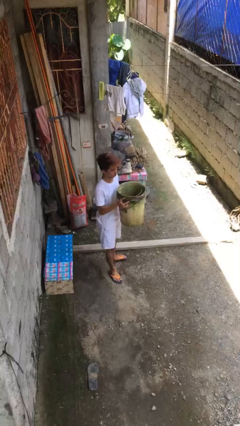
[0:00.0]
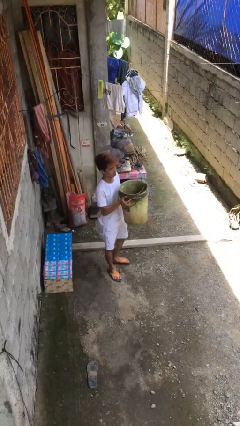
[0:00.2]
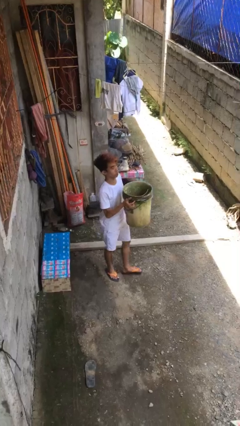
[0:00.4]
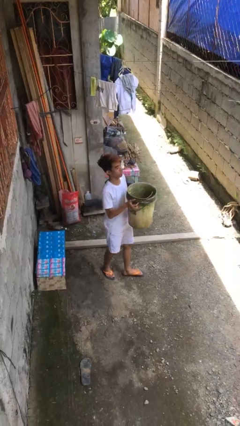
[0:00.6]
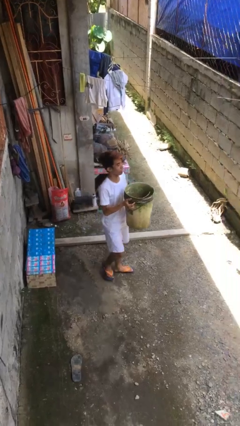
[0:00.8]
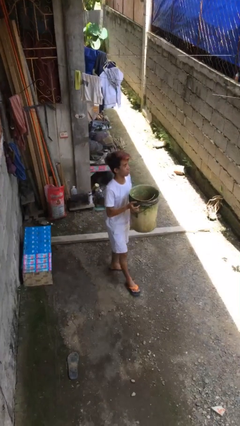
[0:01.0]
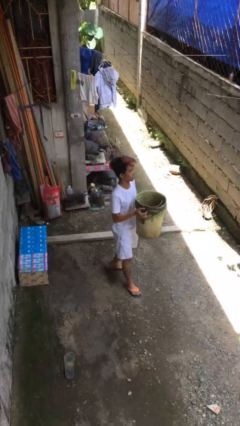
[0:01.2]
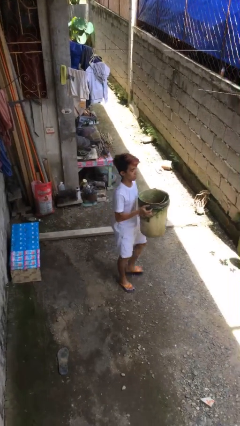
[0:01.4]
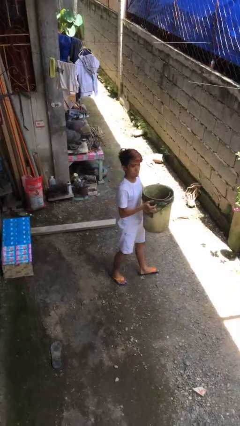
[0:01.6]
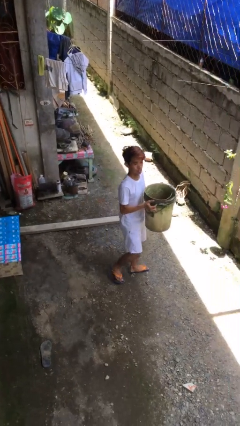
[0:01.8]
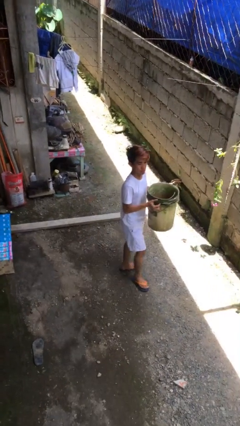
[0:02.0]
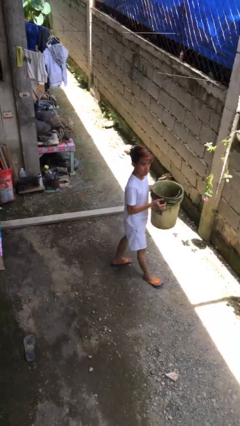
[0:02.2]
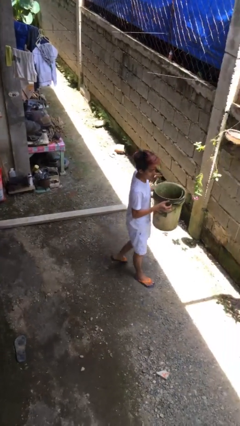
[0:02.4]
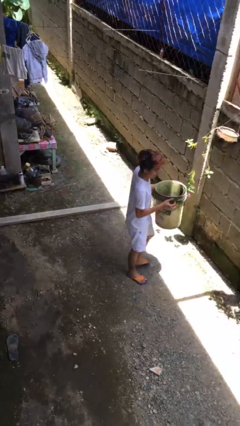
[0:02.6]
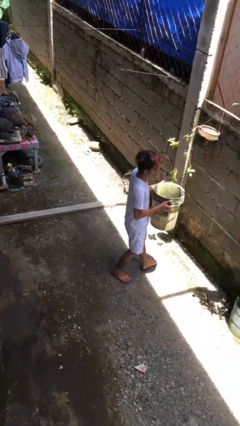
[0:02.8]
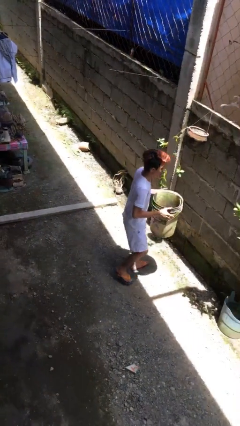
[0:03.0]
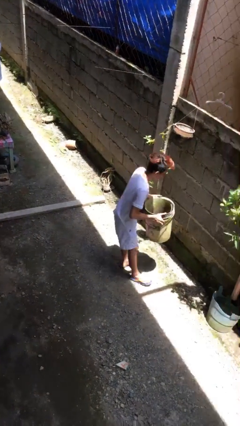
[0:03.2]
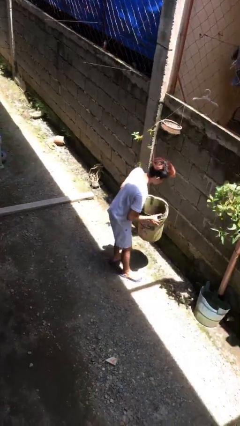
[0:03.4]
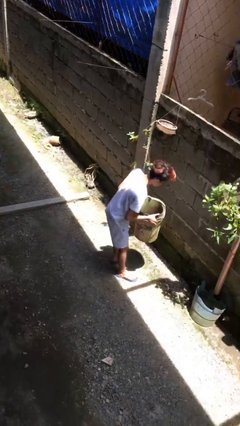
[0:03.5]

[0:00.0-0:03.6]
person carries heavy object

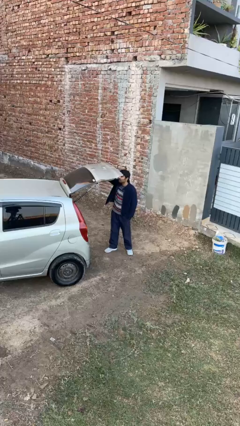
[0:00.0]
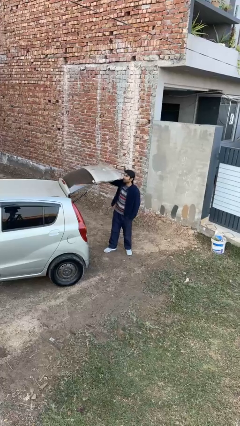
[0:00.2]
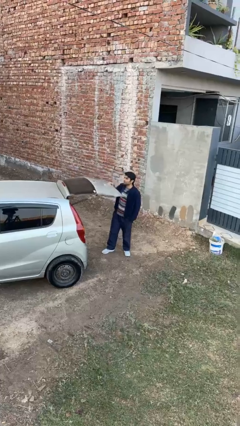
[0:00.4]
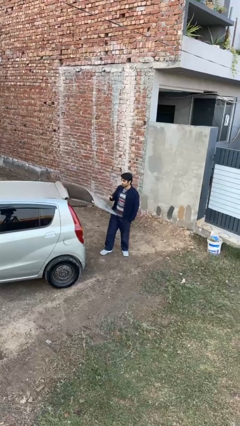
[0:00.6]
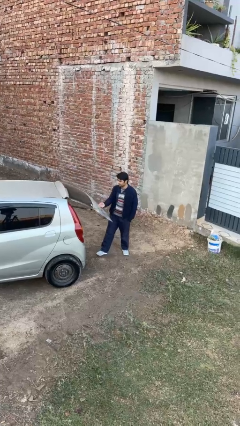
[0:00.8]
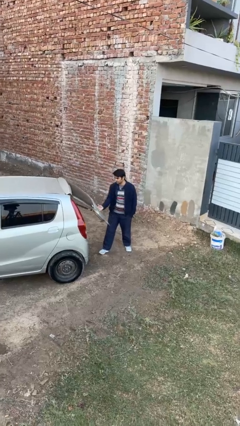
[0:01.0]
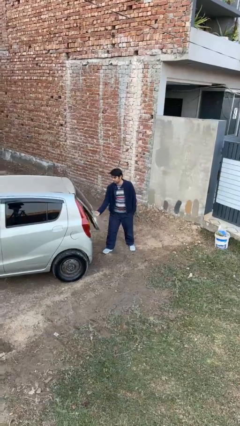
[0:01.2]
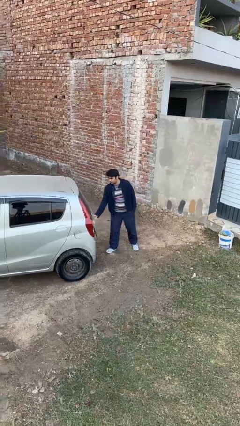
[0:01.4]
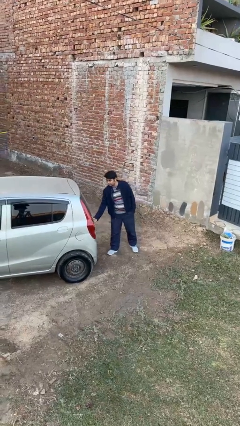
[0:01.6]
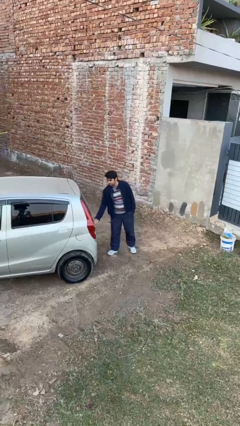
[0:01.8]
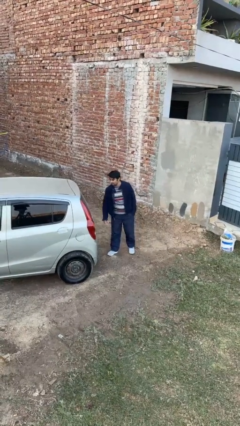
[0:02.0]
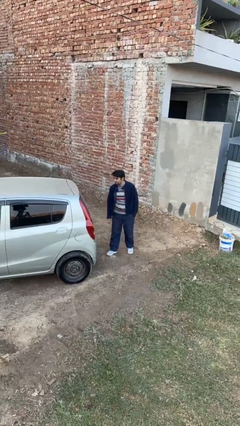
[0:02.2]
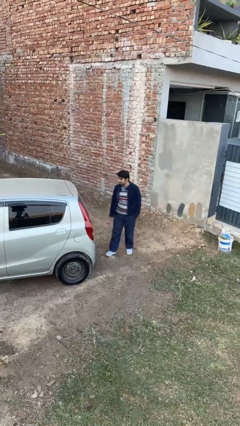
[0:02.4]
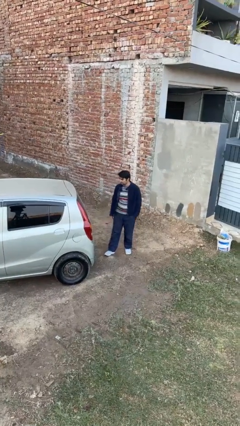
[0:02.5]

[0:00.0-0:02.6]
person closes car trunk

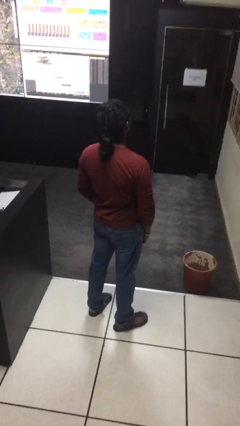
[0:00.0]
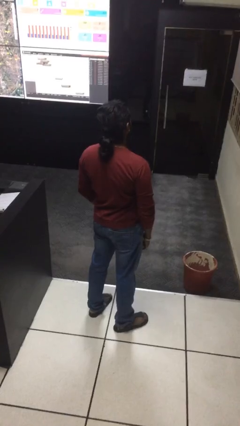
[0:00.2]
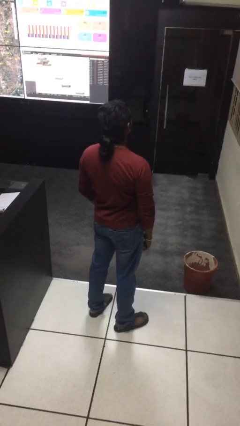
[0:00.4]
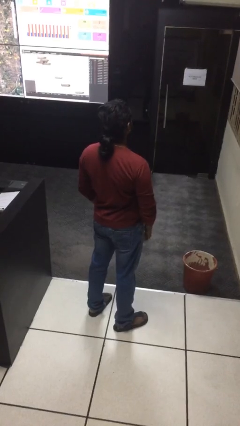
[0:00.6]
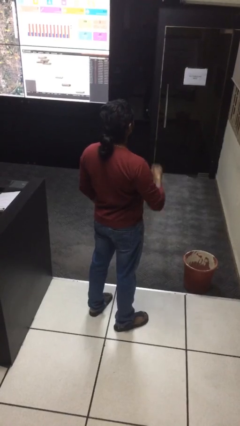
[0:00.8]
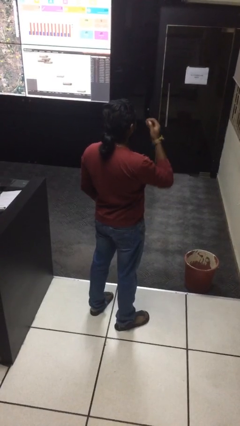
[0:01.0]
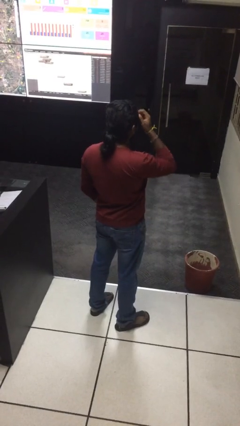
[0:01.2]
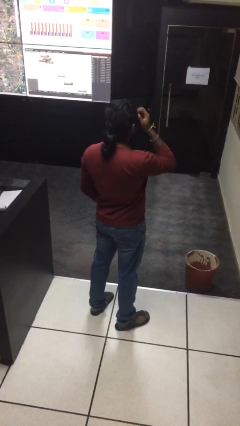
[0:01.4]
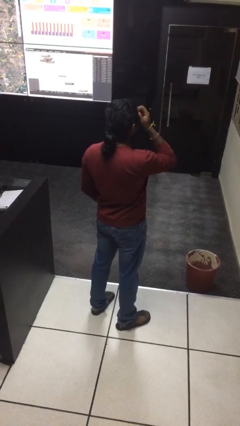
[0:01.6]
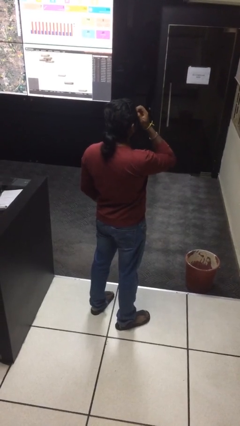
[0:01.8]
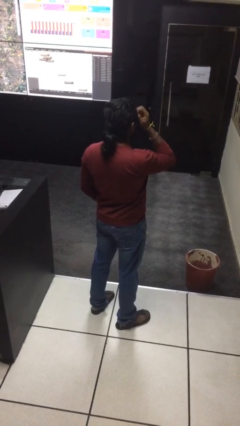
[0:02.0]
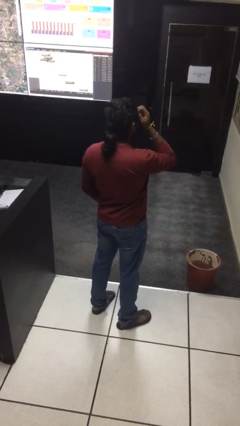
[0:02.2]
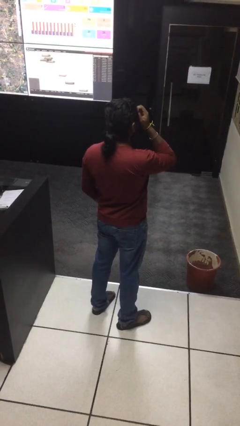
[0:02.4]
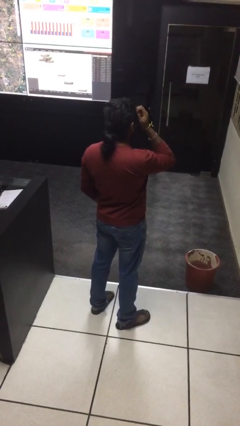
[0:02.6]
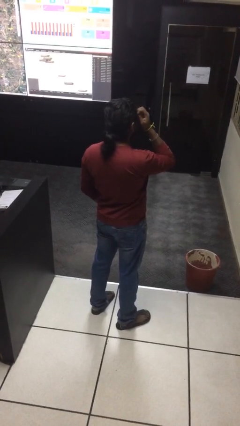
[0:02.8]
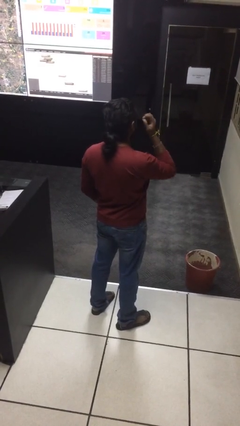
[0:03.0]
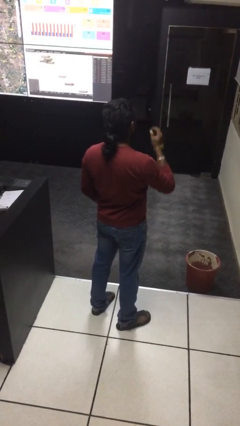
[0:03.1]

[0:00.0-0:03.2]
person scratches face

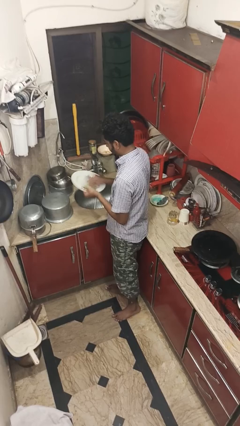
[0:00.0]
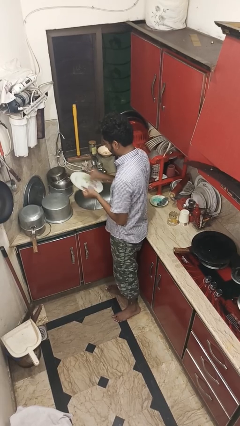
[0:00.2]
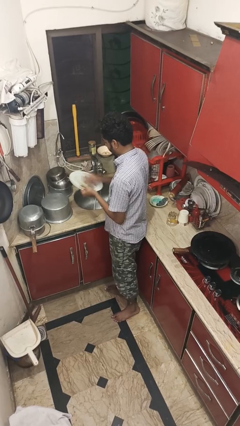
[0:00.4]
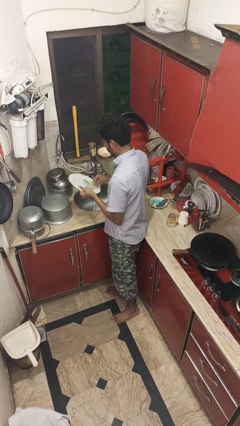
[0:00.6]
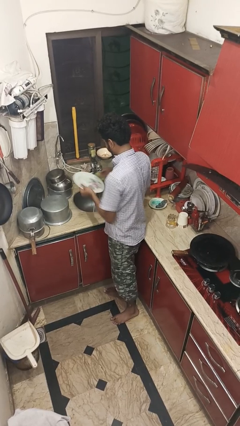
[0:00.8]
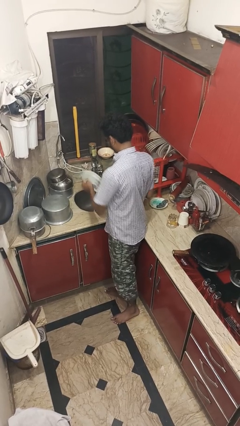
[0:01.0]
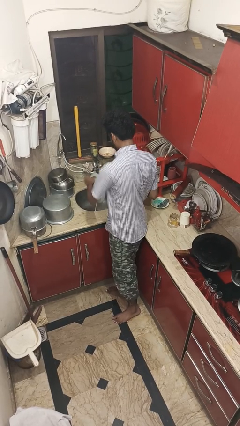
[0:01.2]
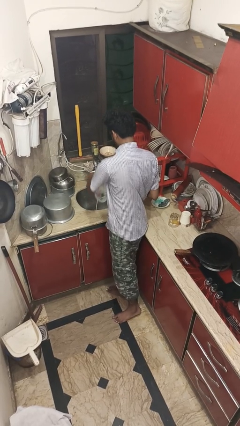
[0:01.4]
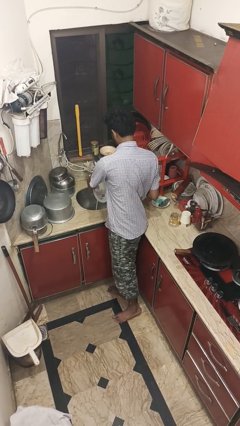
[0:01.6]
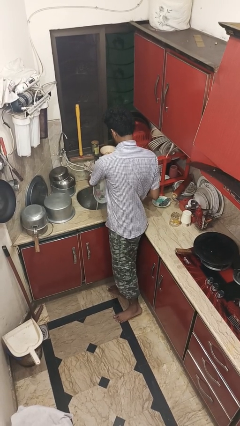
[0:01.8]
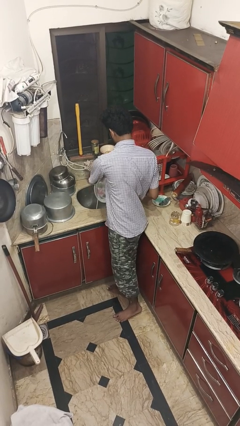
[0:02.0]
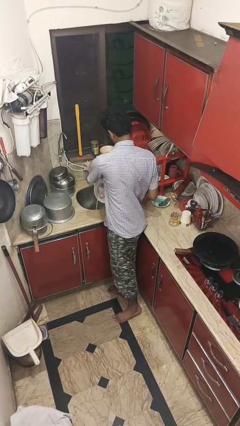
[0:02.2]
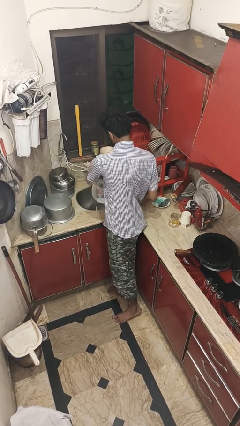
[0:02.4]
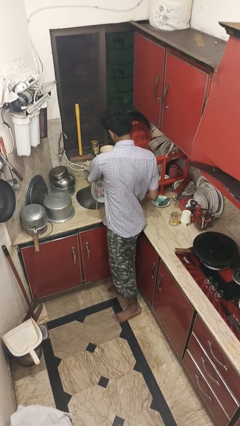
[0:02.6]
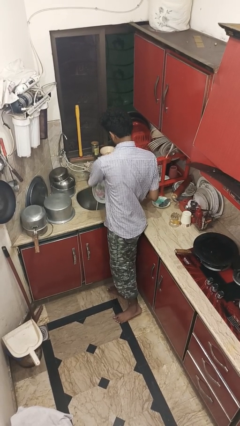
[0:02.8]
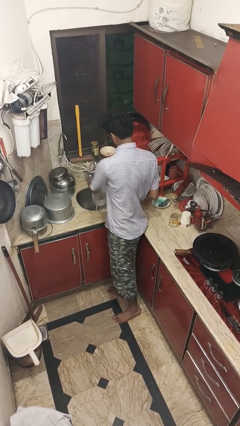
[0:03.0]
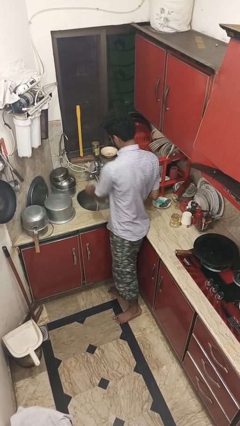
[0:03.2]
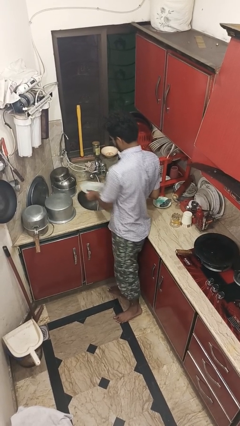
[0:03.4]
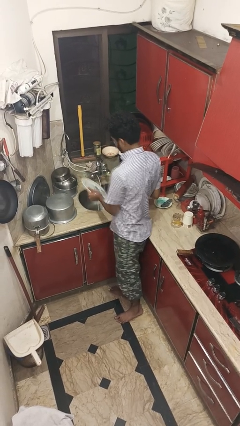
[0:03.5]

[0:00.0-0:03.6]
person washes dish

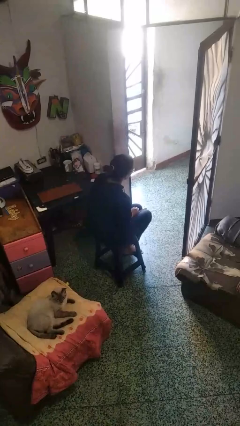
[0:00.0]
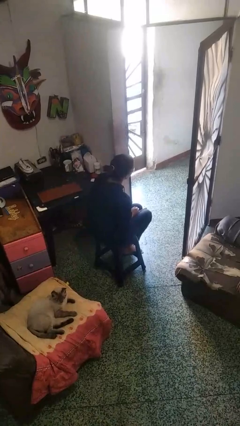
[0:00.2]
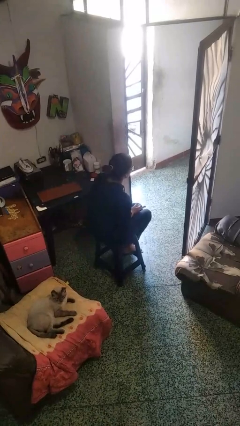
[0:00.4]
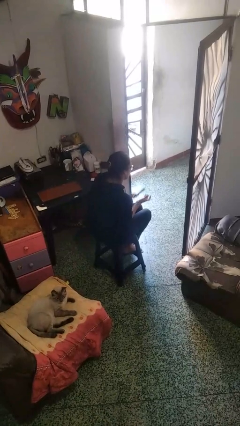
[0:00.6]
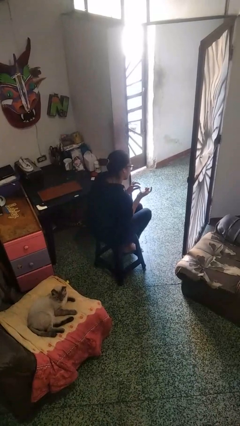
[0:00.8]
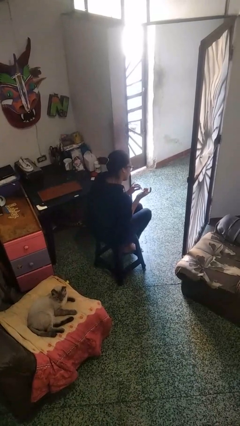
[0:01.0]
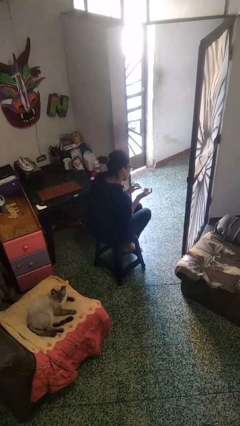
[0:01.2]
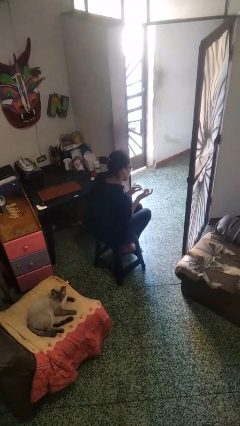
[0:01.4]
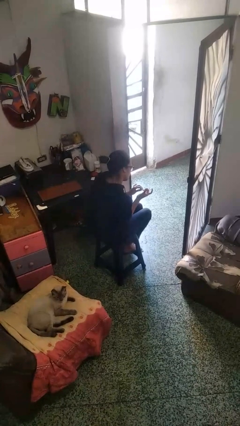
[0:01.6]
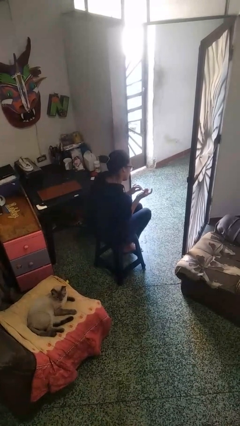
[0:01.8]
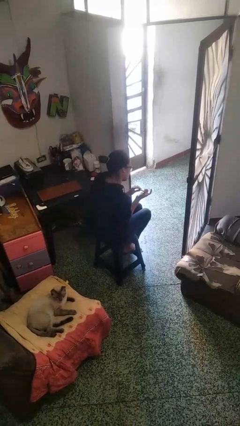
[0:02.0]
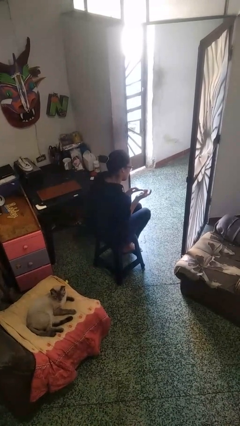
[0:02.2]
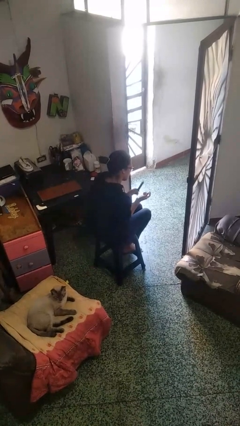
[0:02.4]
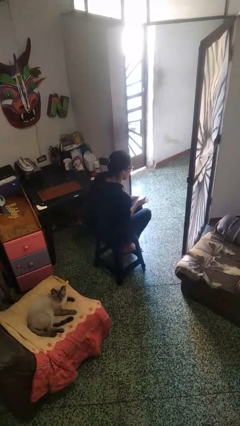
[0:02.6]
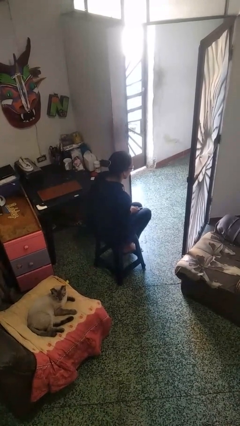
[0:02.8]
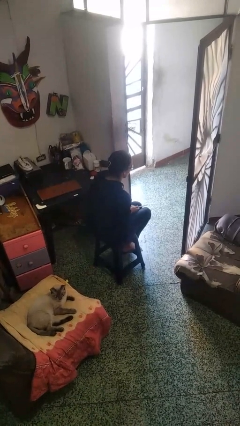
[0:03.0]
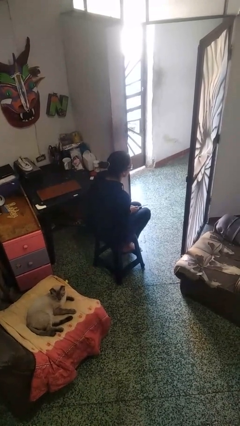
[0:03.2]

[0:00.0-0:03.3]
person files fingernails

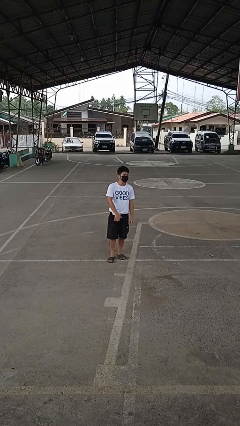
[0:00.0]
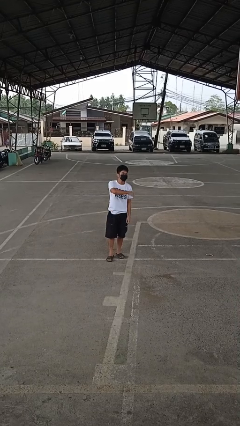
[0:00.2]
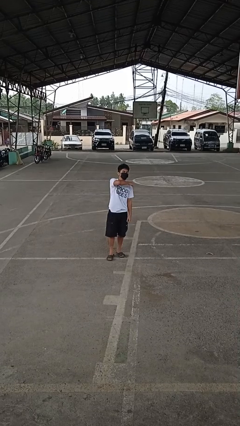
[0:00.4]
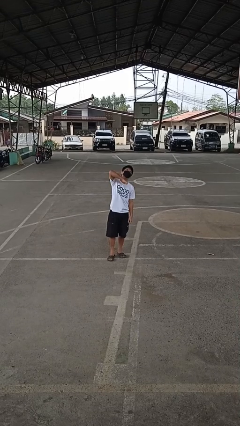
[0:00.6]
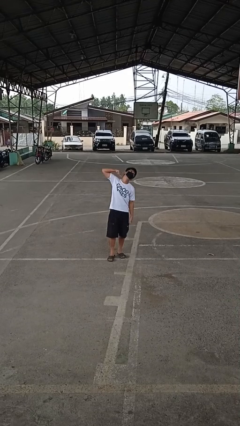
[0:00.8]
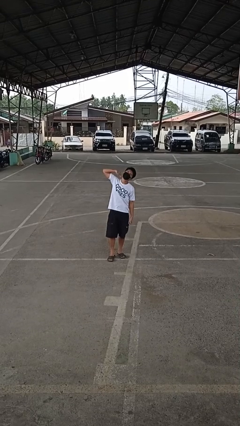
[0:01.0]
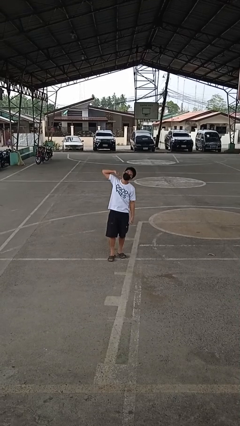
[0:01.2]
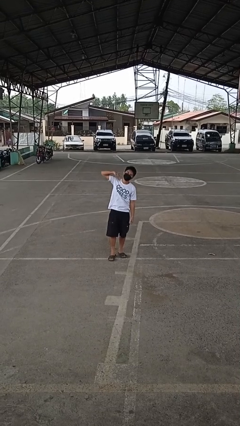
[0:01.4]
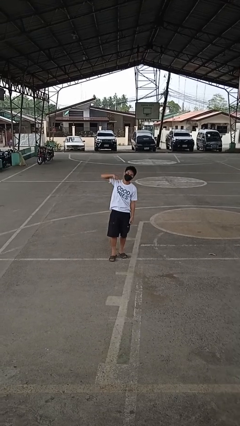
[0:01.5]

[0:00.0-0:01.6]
person gestures cut
